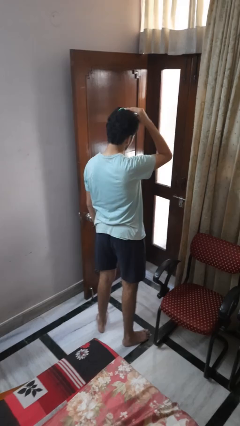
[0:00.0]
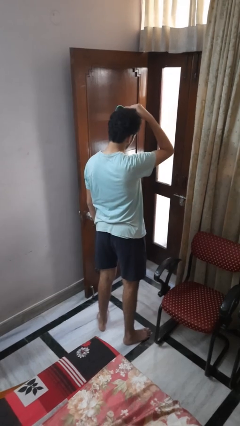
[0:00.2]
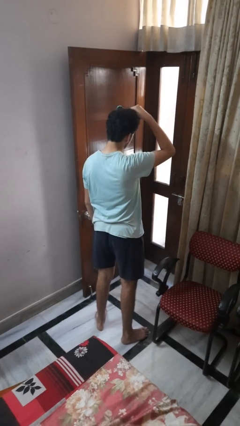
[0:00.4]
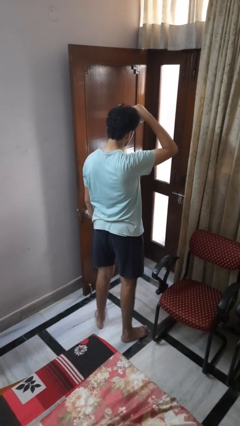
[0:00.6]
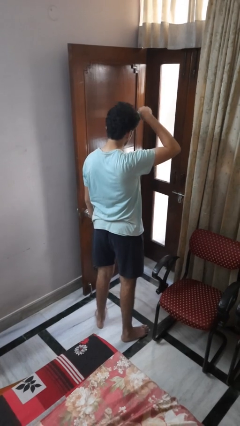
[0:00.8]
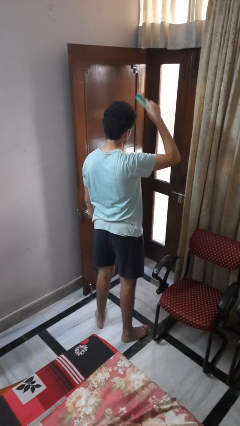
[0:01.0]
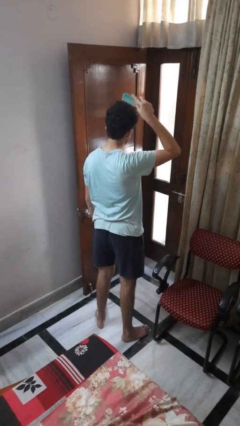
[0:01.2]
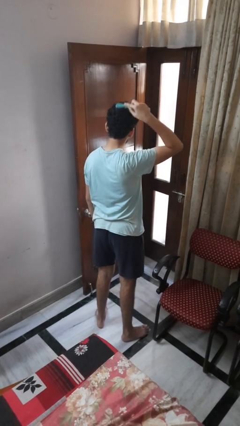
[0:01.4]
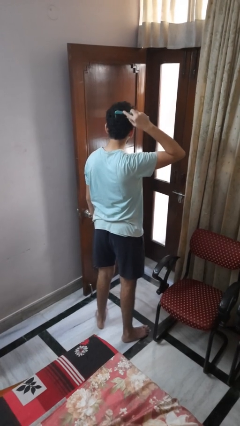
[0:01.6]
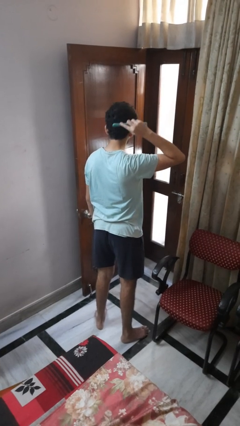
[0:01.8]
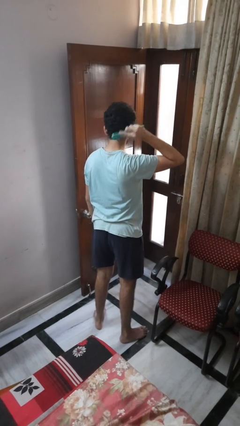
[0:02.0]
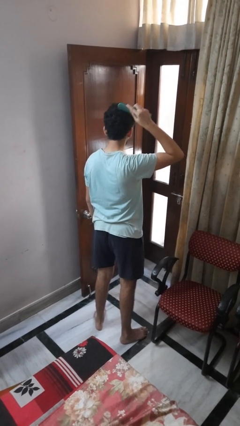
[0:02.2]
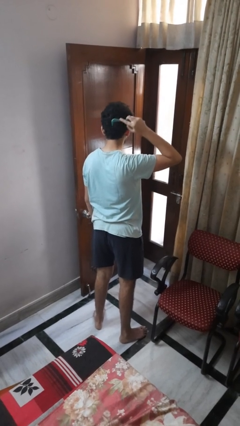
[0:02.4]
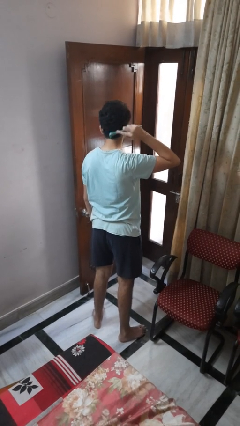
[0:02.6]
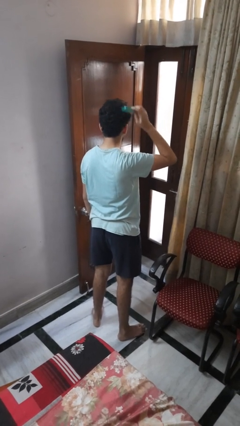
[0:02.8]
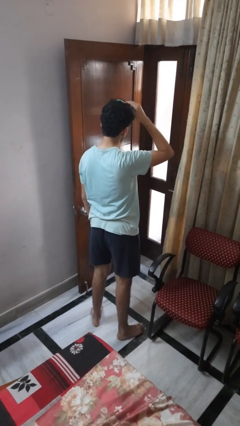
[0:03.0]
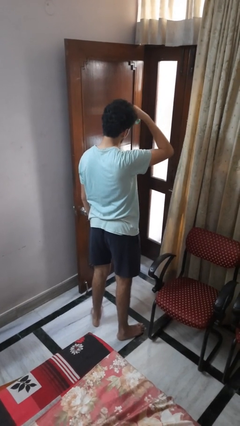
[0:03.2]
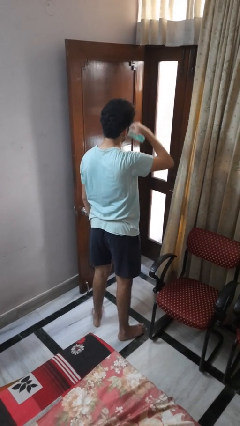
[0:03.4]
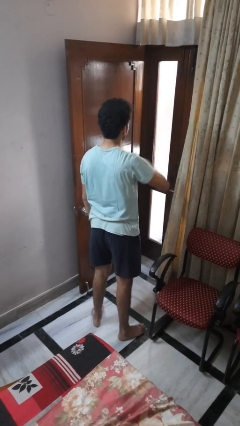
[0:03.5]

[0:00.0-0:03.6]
person brushes hair

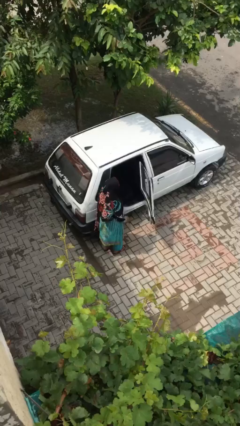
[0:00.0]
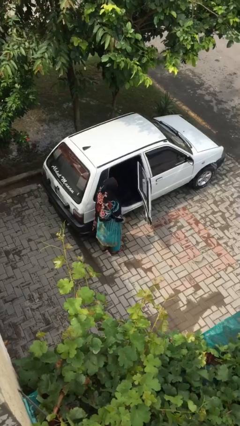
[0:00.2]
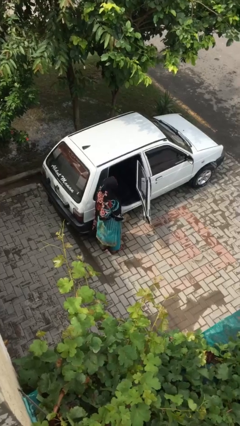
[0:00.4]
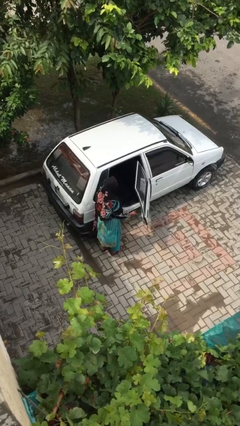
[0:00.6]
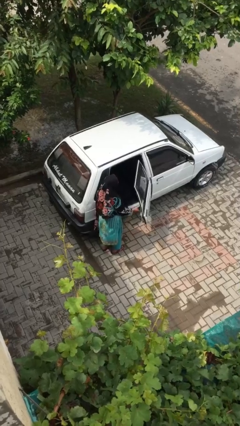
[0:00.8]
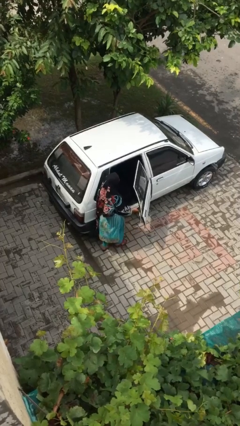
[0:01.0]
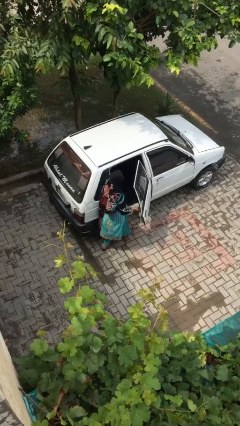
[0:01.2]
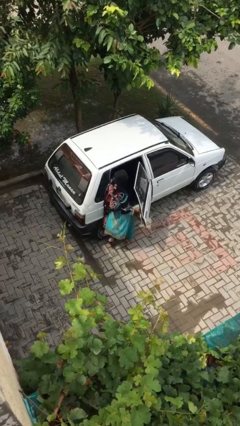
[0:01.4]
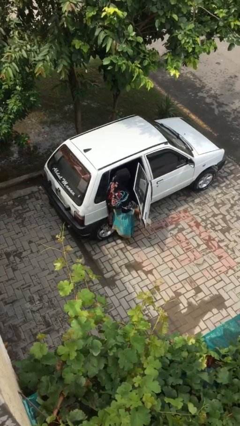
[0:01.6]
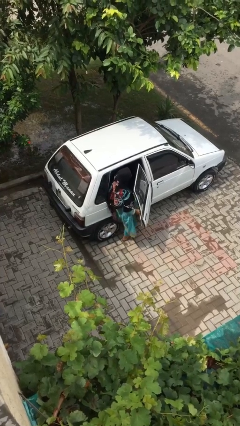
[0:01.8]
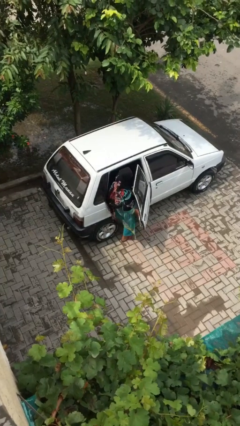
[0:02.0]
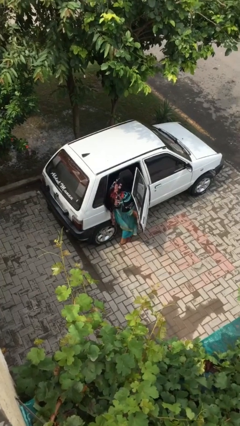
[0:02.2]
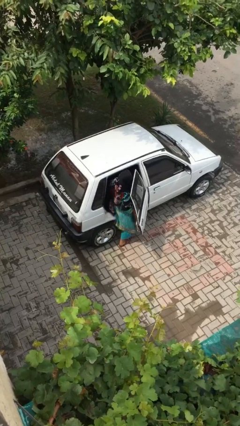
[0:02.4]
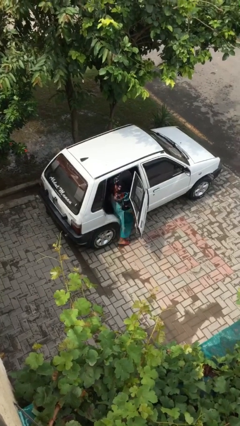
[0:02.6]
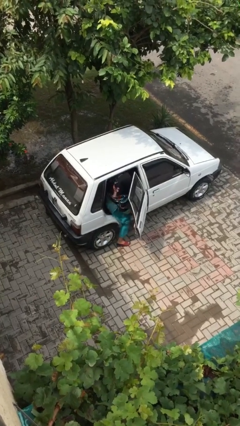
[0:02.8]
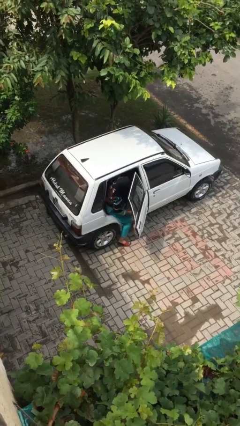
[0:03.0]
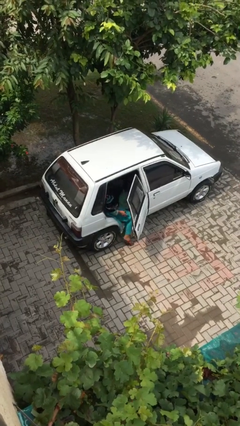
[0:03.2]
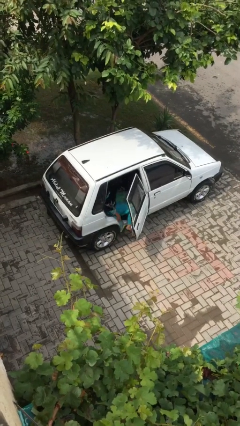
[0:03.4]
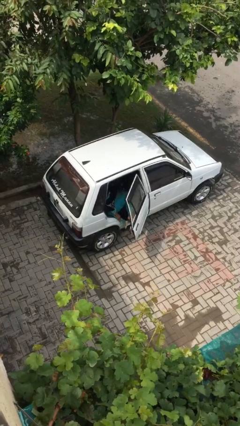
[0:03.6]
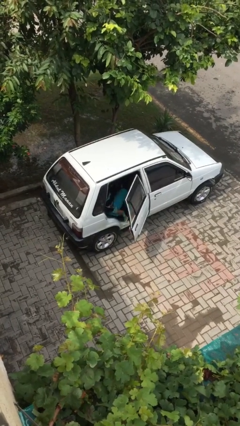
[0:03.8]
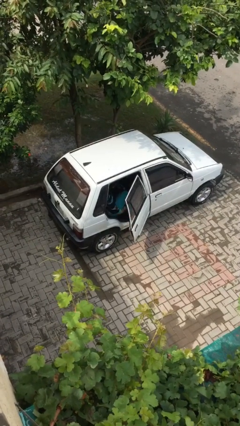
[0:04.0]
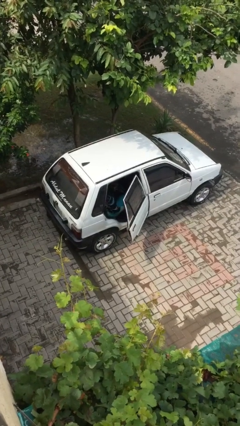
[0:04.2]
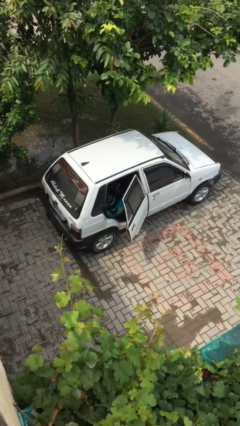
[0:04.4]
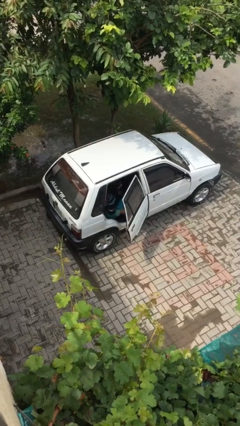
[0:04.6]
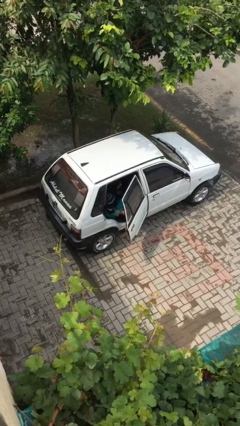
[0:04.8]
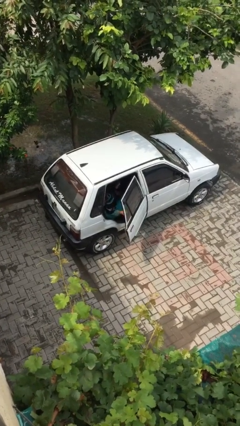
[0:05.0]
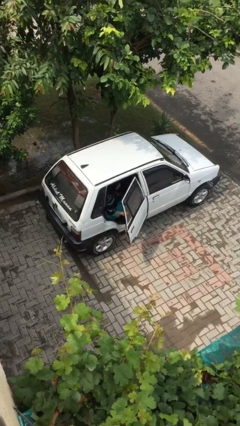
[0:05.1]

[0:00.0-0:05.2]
person enters car

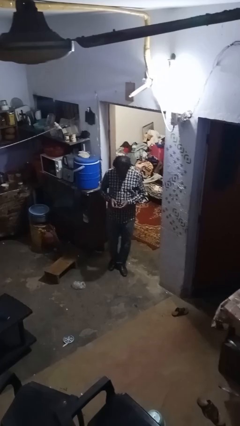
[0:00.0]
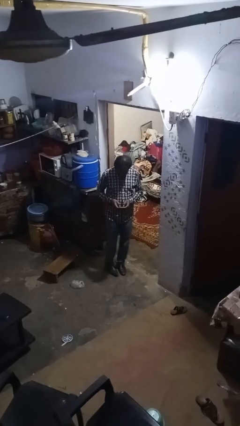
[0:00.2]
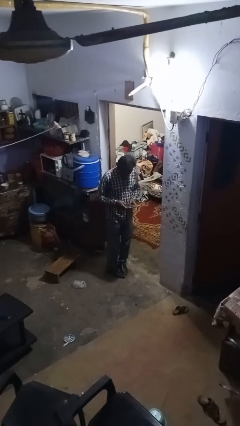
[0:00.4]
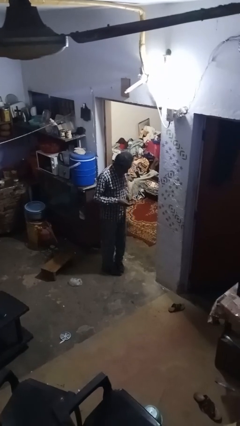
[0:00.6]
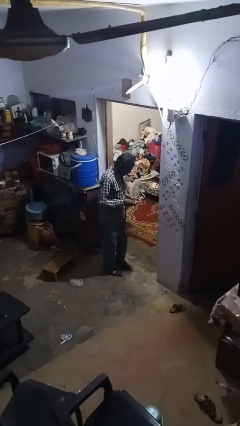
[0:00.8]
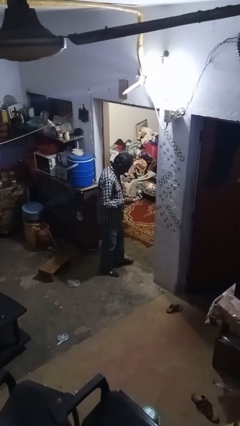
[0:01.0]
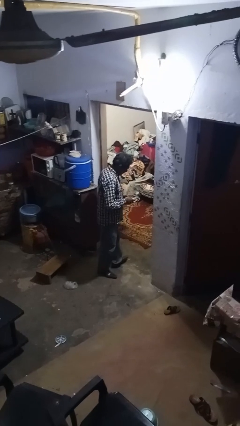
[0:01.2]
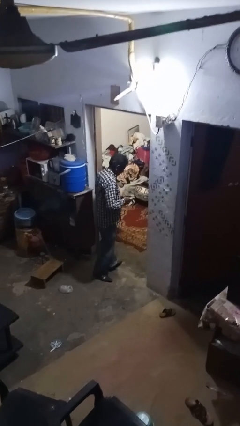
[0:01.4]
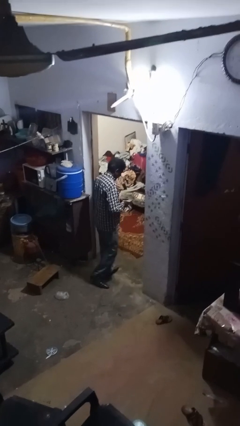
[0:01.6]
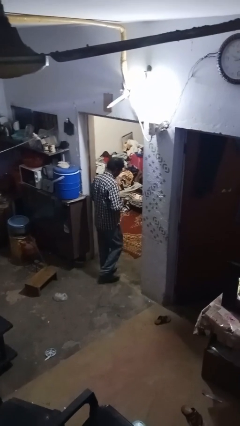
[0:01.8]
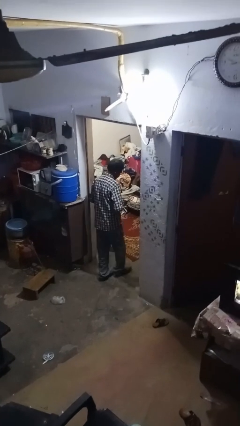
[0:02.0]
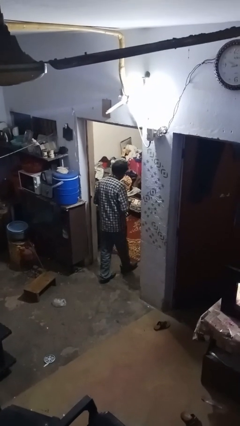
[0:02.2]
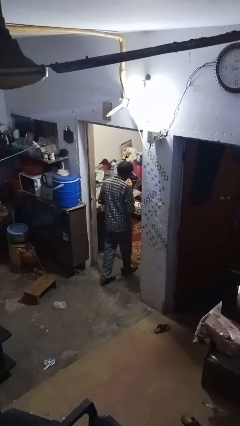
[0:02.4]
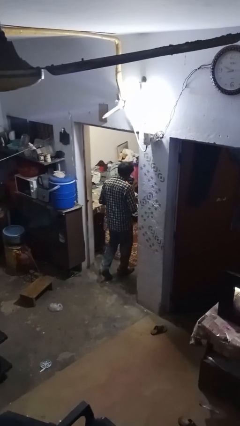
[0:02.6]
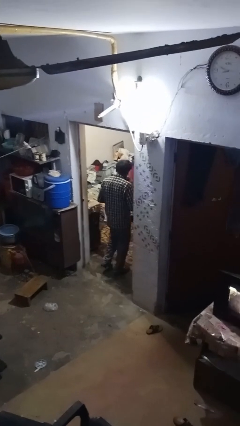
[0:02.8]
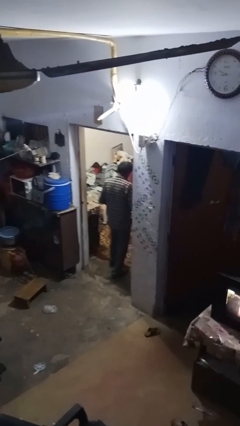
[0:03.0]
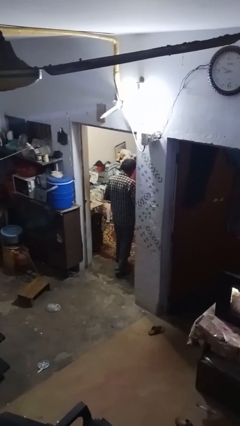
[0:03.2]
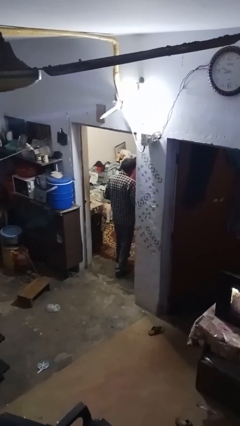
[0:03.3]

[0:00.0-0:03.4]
person exits scene through structure

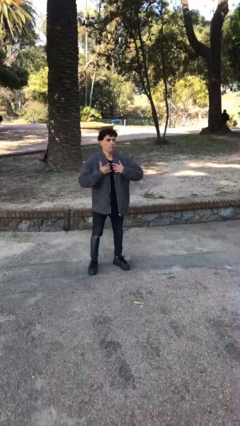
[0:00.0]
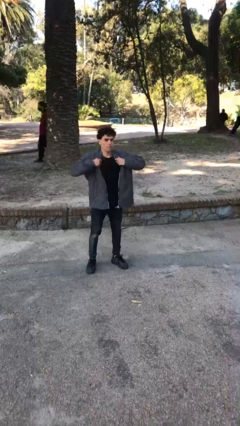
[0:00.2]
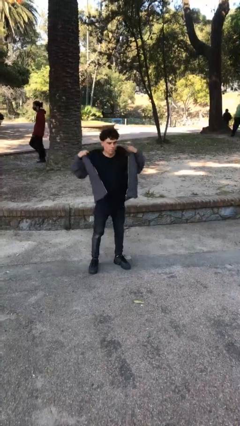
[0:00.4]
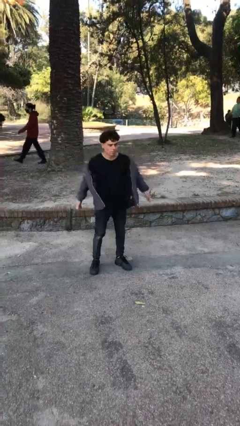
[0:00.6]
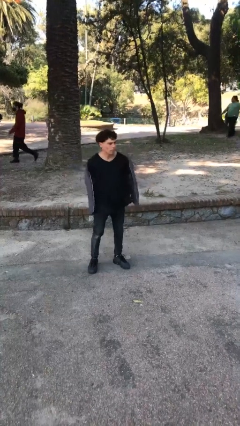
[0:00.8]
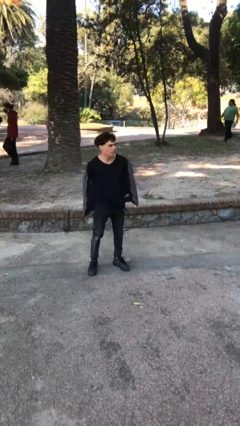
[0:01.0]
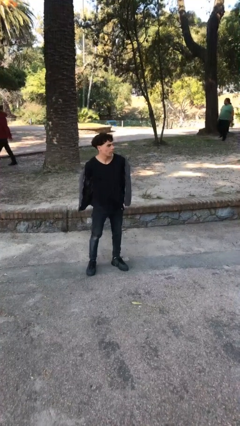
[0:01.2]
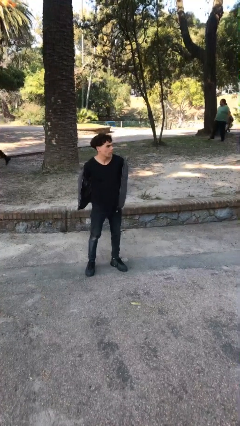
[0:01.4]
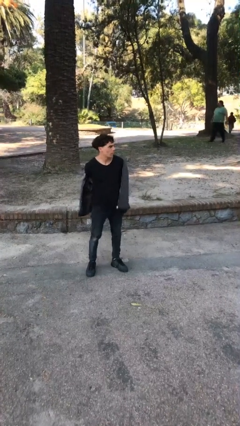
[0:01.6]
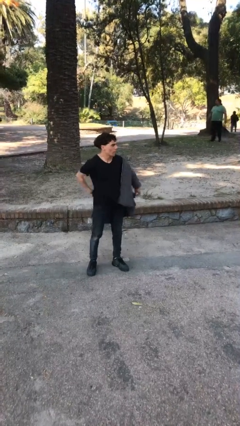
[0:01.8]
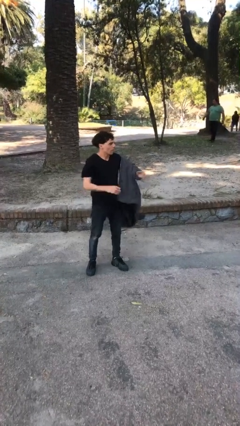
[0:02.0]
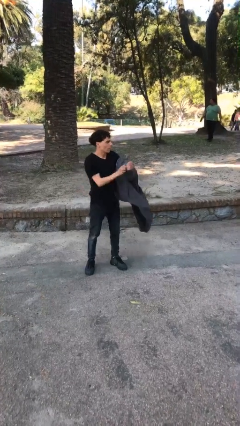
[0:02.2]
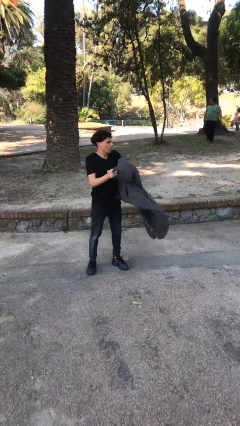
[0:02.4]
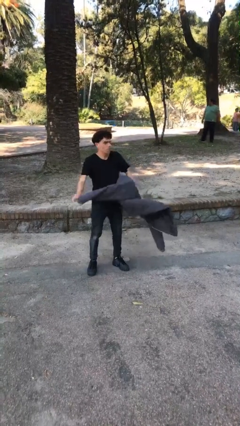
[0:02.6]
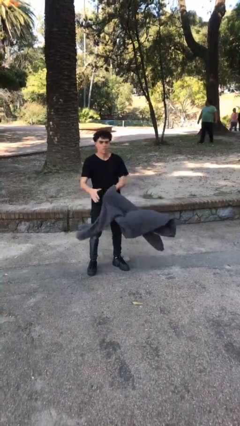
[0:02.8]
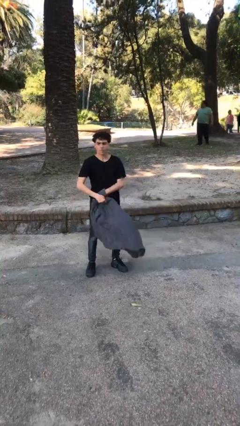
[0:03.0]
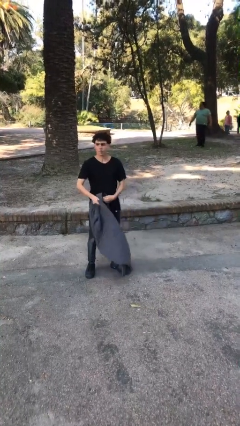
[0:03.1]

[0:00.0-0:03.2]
person takes off jacket

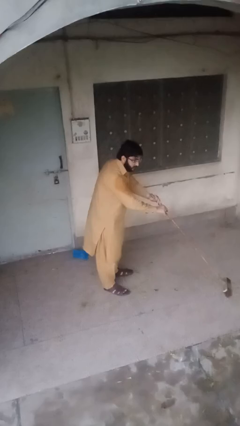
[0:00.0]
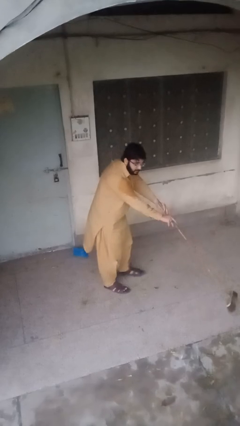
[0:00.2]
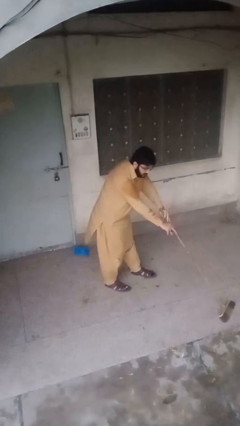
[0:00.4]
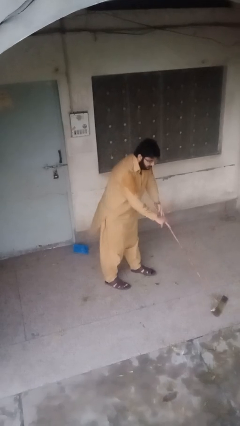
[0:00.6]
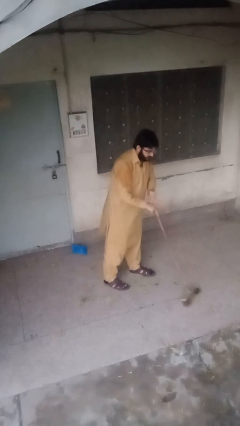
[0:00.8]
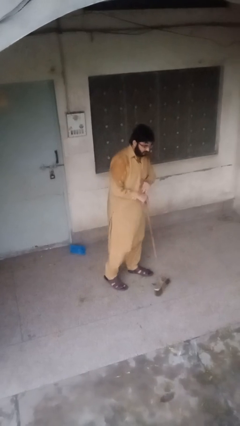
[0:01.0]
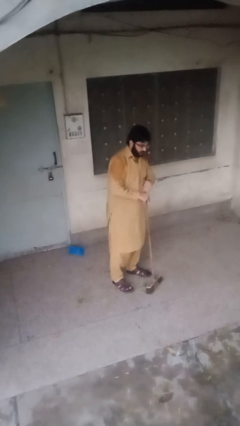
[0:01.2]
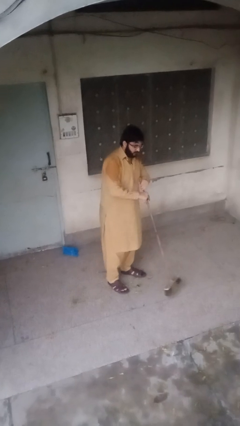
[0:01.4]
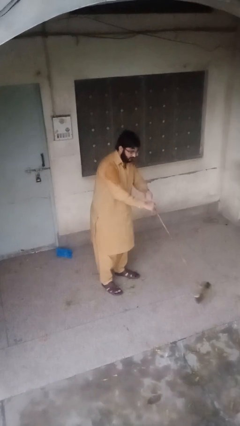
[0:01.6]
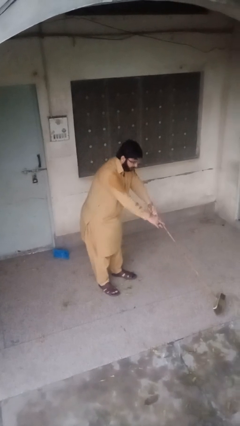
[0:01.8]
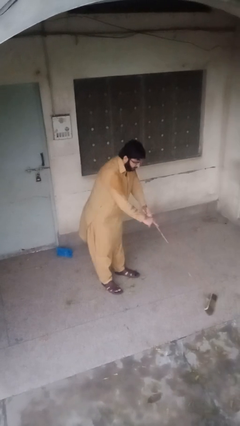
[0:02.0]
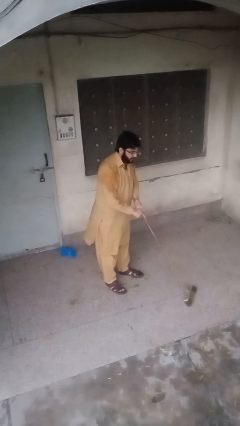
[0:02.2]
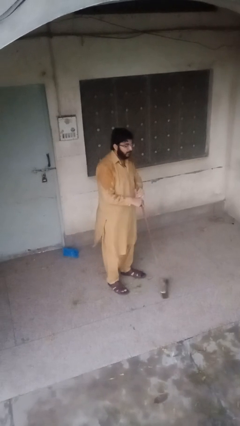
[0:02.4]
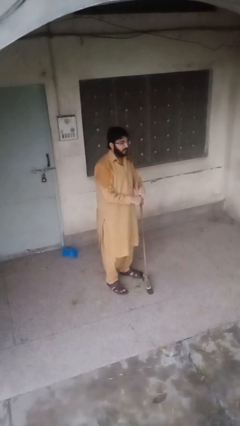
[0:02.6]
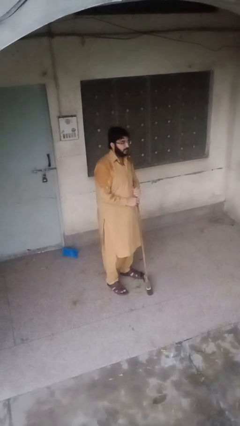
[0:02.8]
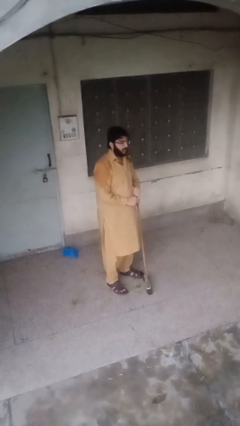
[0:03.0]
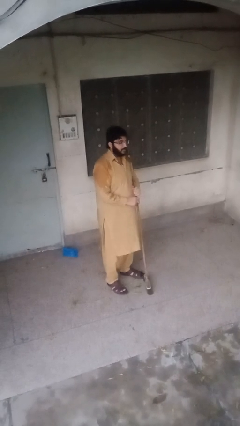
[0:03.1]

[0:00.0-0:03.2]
person sweeps floor
